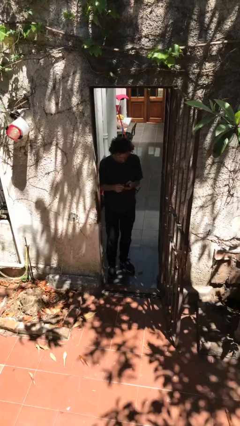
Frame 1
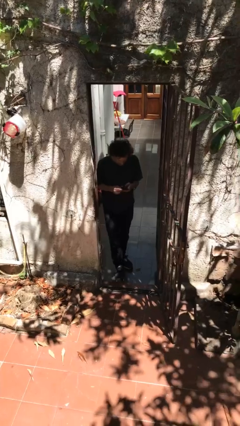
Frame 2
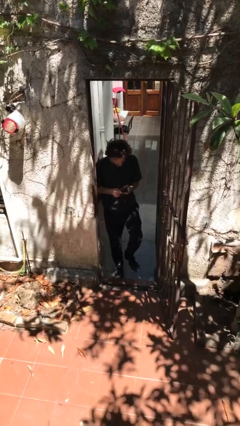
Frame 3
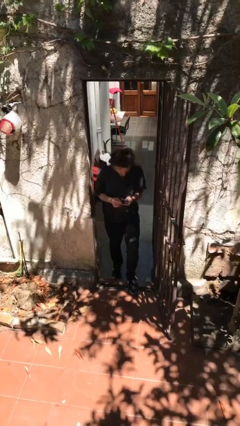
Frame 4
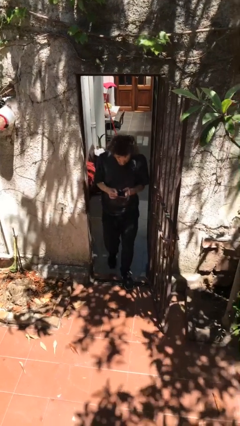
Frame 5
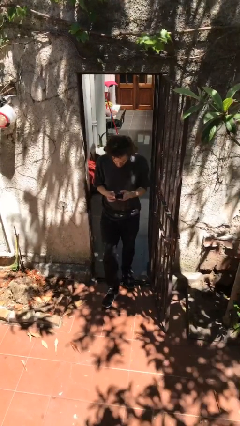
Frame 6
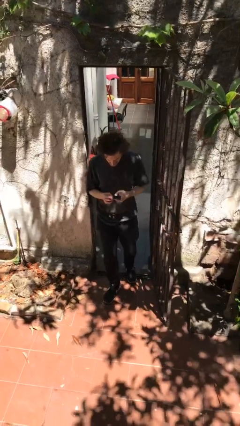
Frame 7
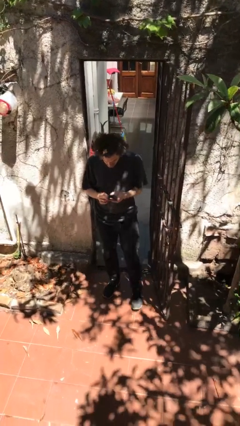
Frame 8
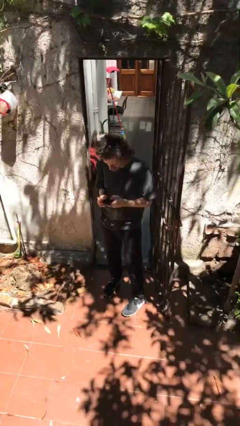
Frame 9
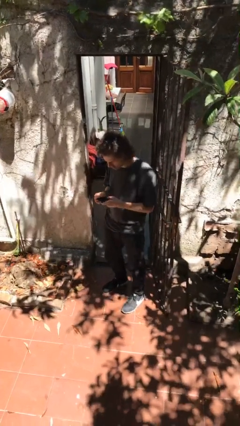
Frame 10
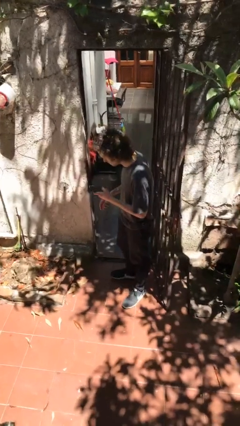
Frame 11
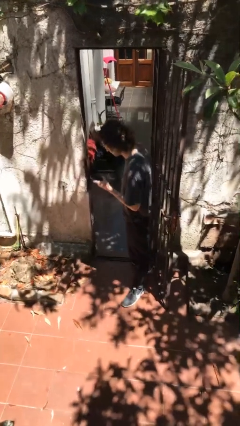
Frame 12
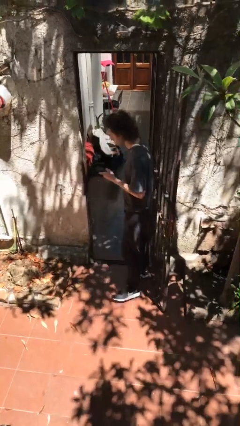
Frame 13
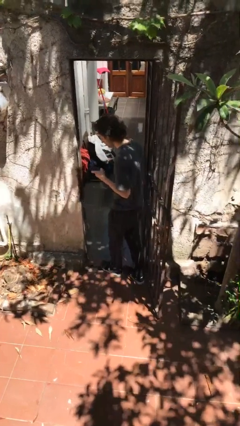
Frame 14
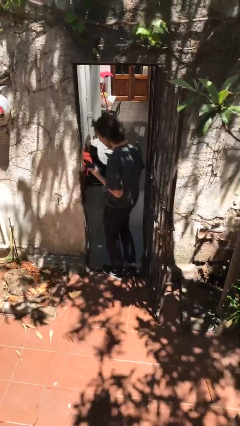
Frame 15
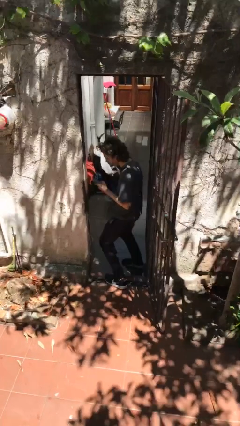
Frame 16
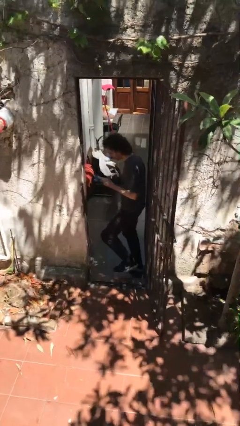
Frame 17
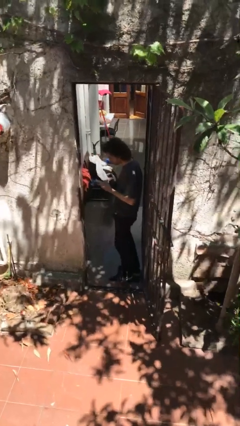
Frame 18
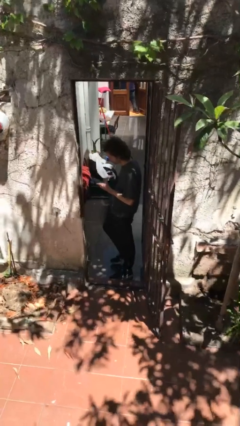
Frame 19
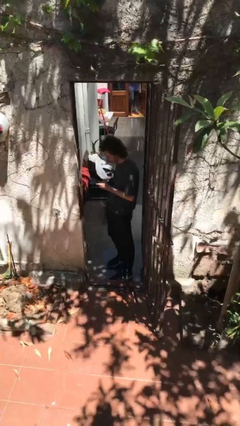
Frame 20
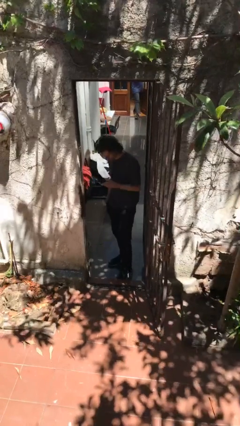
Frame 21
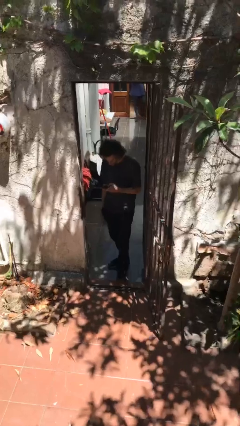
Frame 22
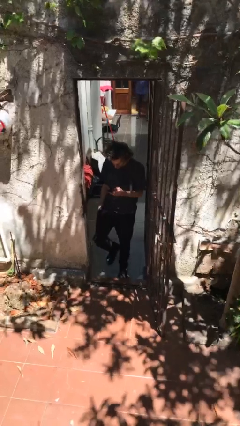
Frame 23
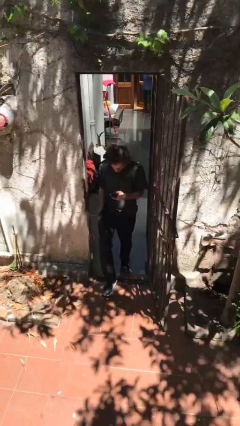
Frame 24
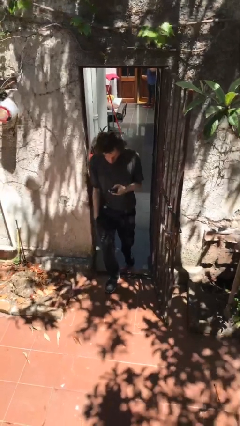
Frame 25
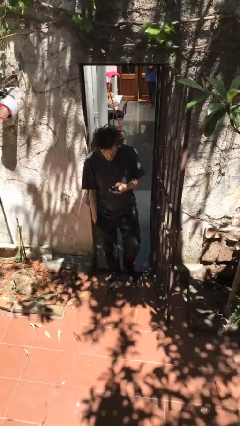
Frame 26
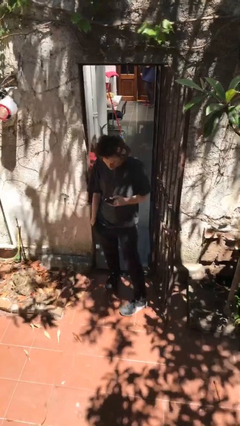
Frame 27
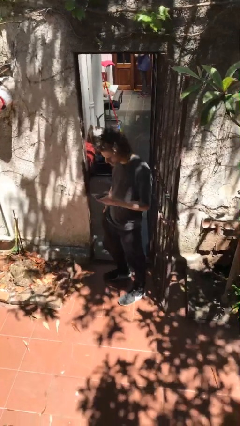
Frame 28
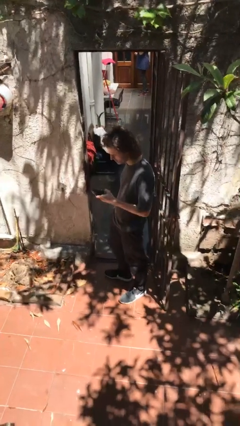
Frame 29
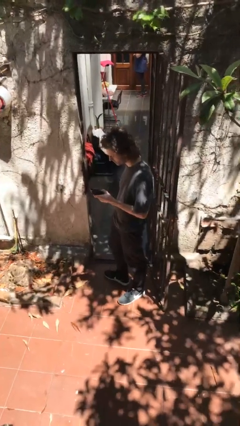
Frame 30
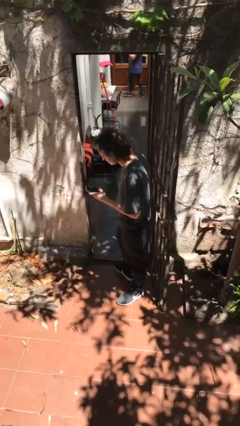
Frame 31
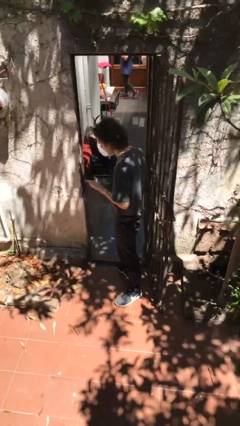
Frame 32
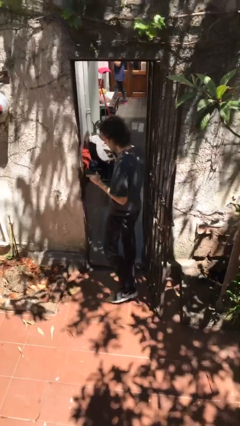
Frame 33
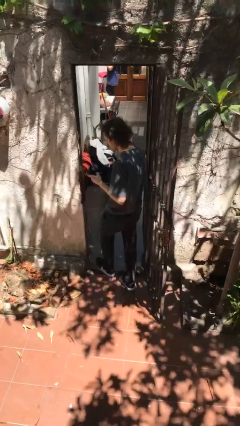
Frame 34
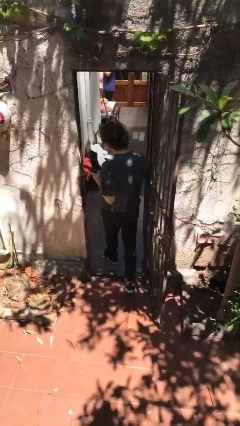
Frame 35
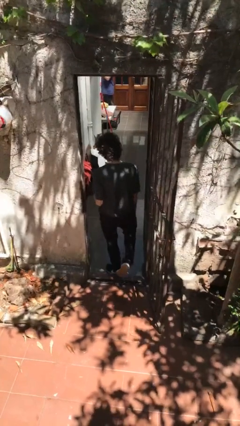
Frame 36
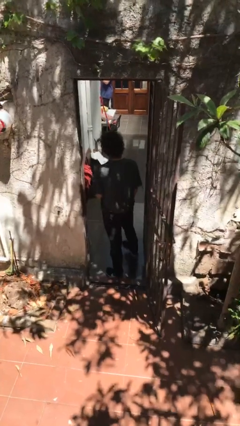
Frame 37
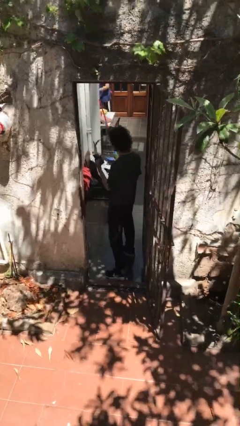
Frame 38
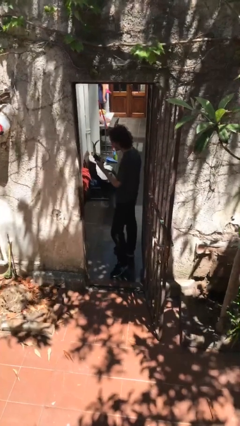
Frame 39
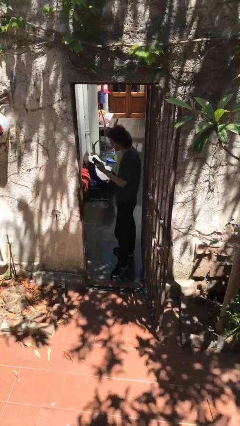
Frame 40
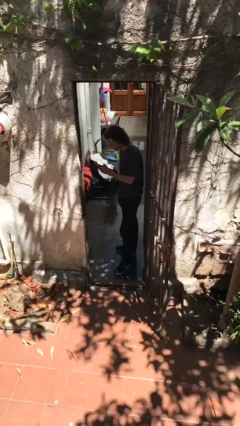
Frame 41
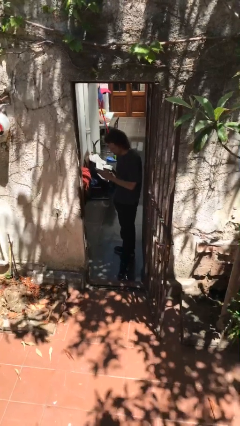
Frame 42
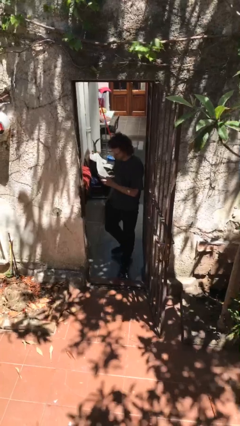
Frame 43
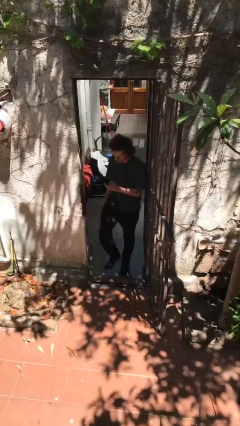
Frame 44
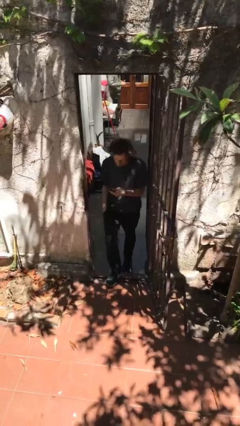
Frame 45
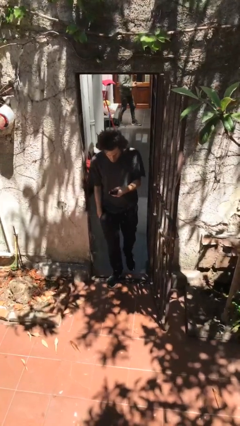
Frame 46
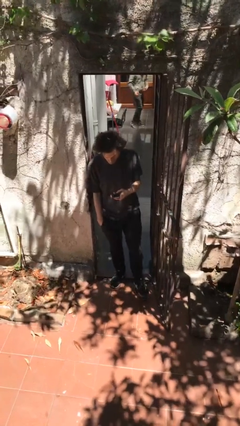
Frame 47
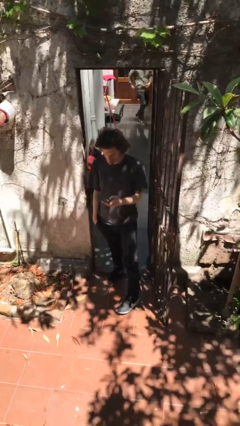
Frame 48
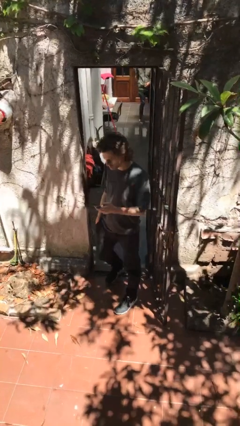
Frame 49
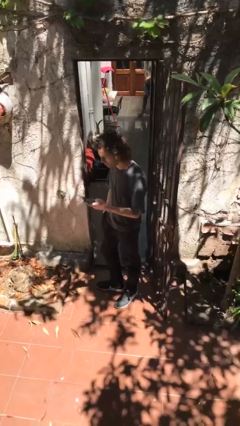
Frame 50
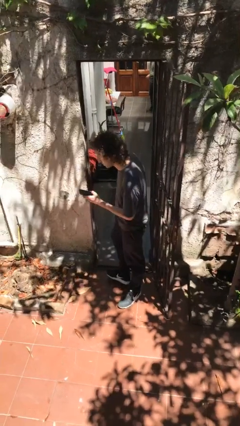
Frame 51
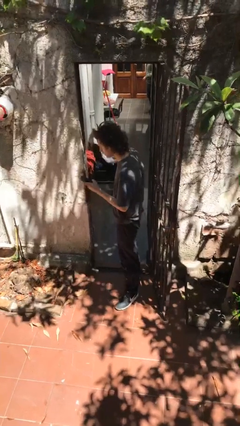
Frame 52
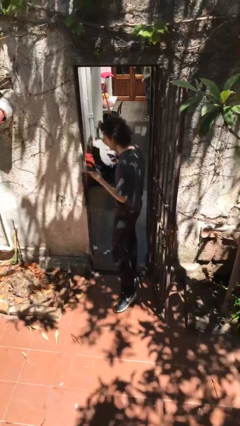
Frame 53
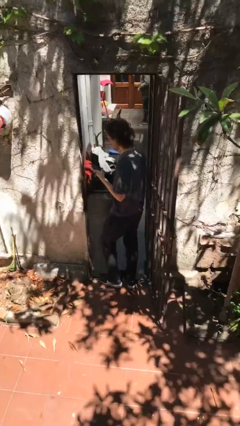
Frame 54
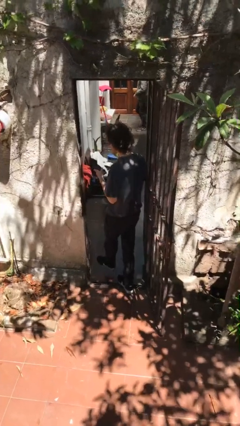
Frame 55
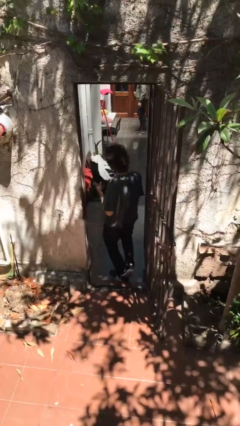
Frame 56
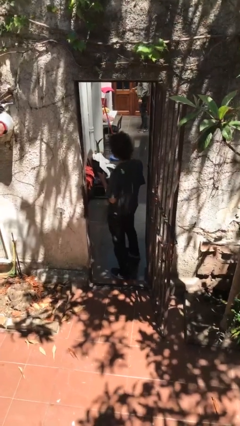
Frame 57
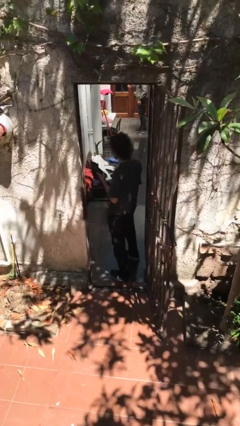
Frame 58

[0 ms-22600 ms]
person texts on phone

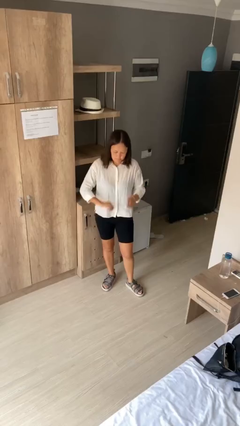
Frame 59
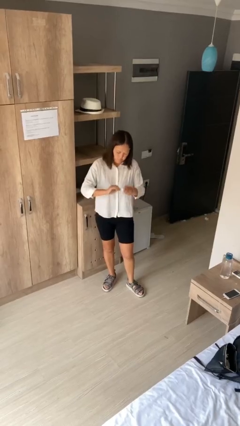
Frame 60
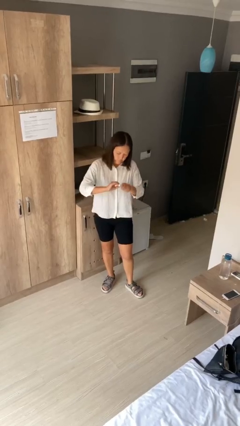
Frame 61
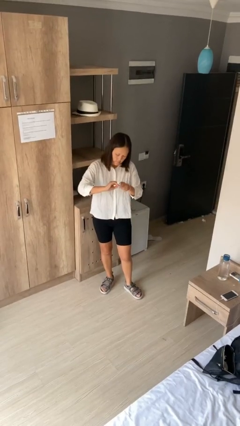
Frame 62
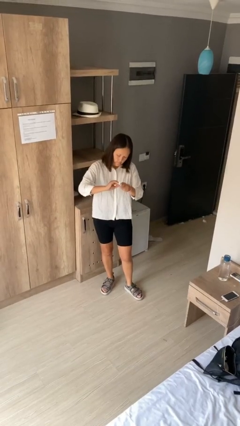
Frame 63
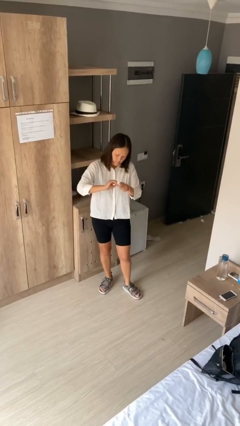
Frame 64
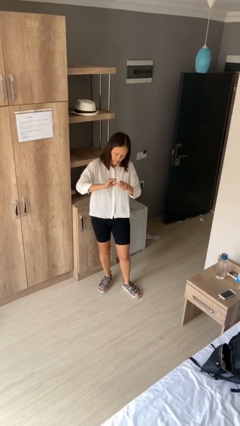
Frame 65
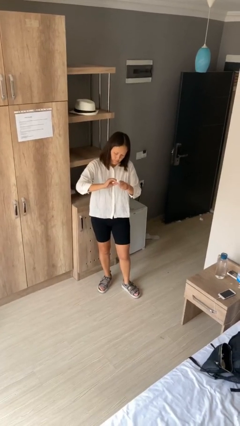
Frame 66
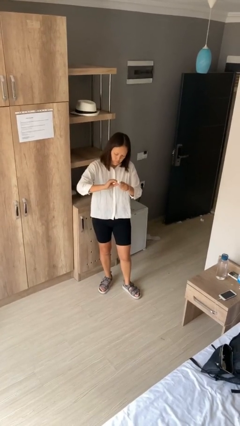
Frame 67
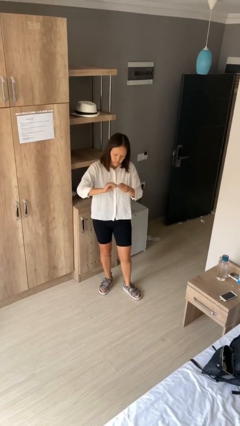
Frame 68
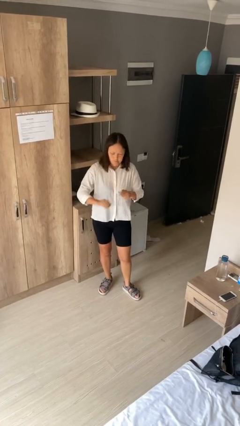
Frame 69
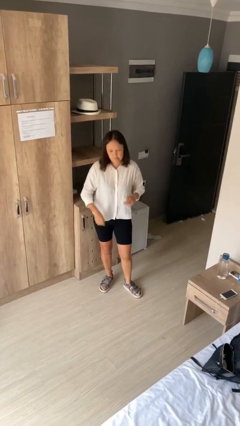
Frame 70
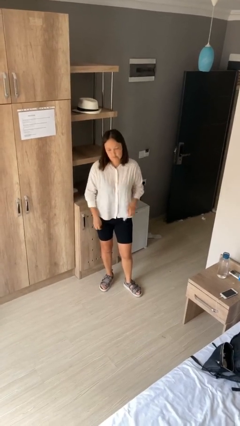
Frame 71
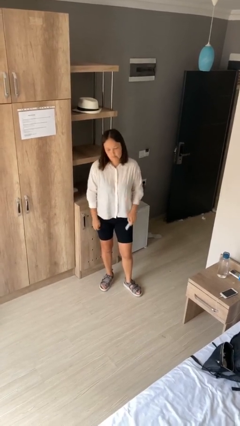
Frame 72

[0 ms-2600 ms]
person files fingernails

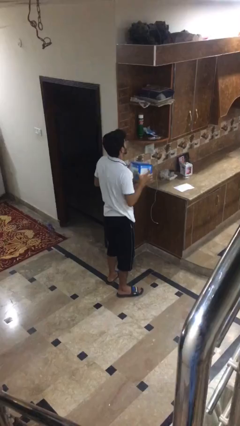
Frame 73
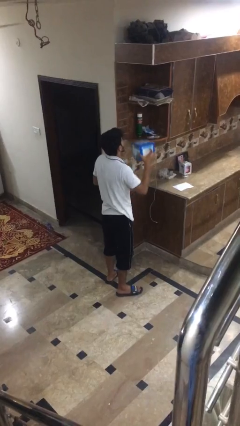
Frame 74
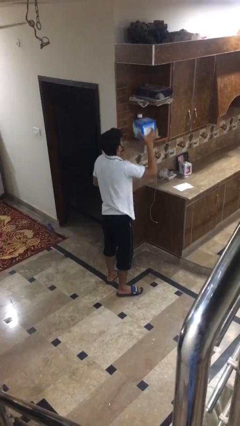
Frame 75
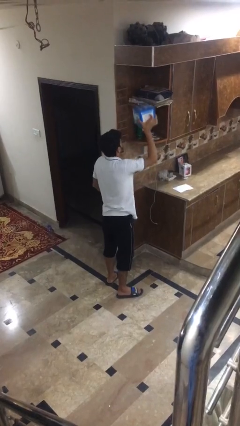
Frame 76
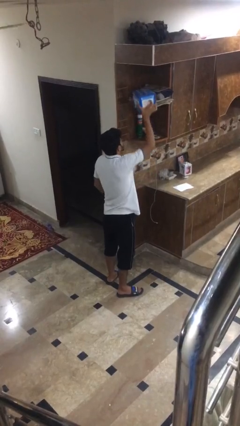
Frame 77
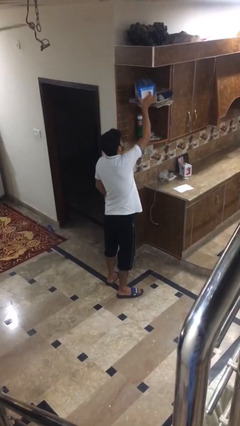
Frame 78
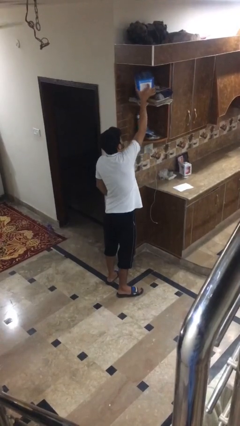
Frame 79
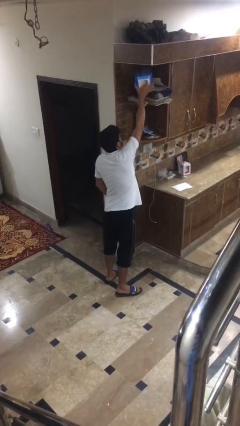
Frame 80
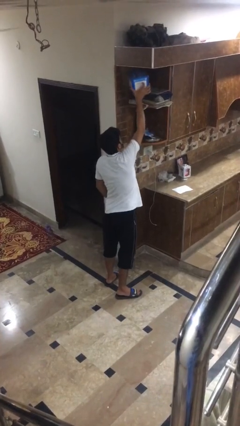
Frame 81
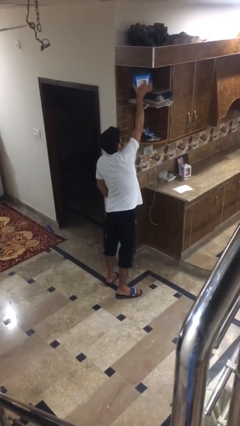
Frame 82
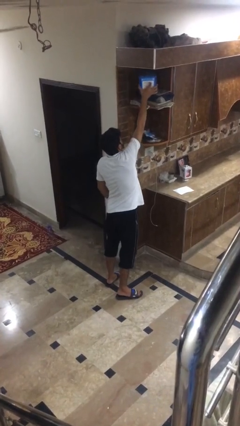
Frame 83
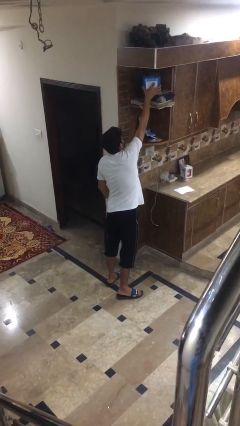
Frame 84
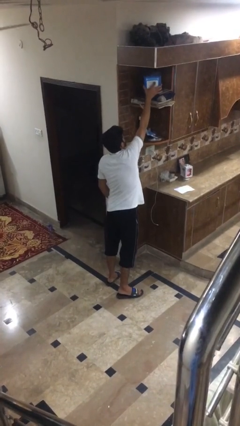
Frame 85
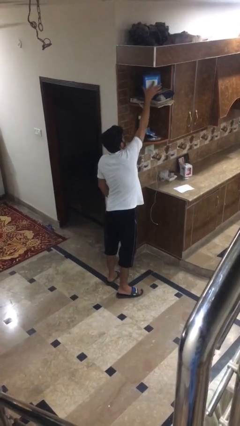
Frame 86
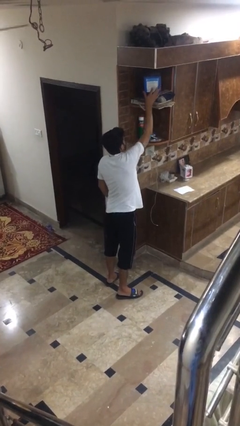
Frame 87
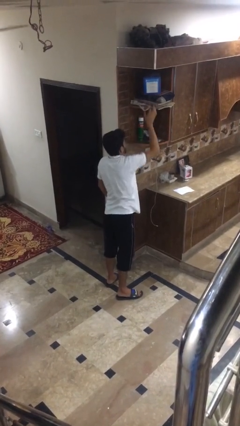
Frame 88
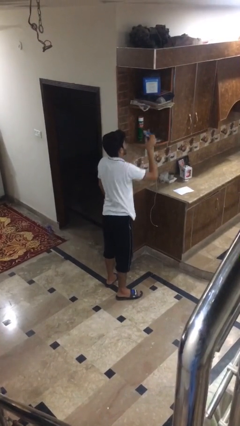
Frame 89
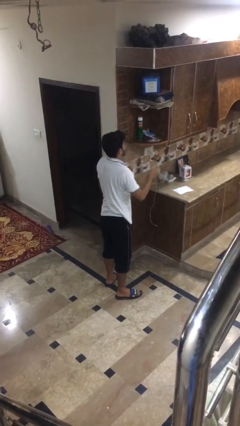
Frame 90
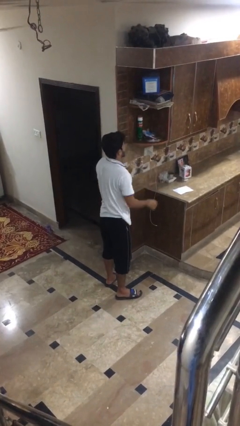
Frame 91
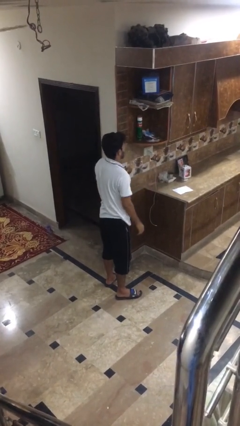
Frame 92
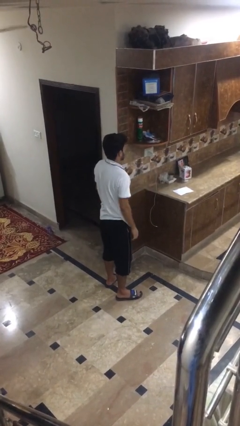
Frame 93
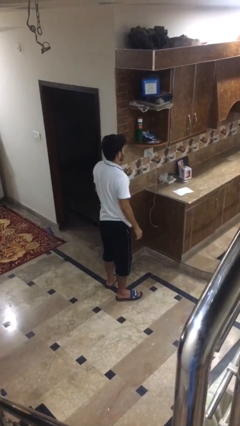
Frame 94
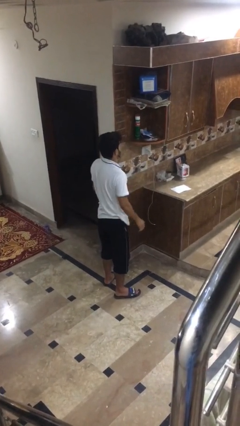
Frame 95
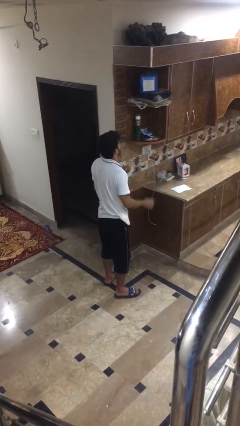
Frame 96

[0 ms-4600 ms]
person picks up object from shelf
